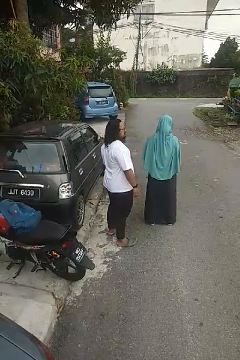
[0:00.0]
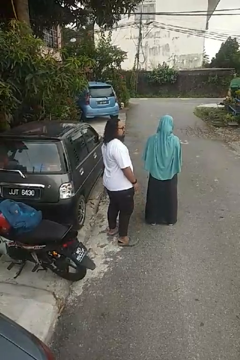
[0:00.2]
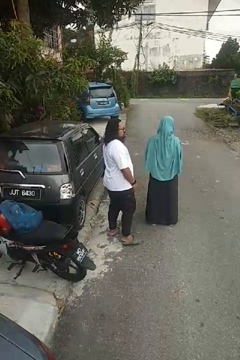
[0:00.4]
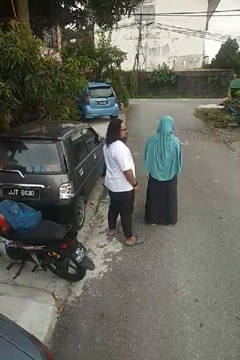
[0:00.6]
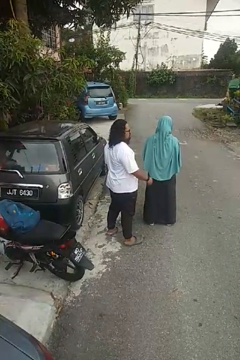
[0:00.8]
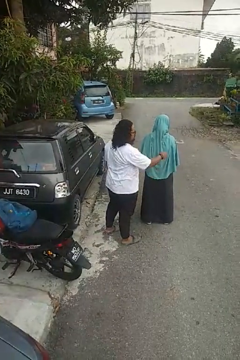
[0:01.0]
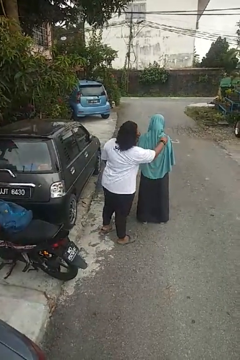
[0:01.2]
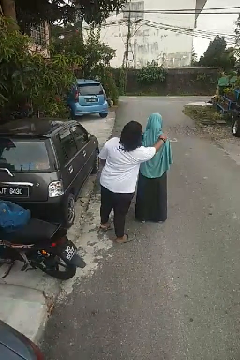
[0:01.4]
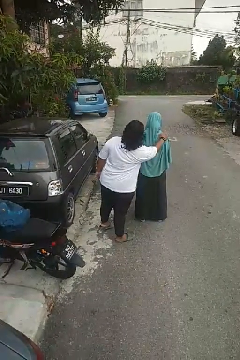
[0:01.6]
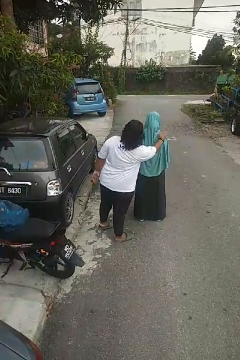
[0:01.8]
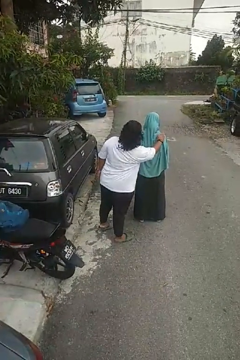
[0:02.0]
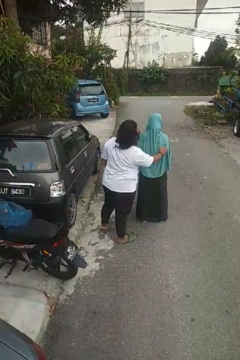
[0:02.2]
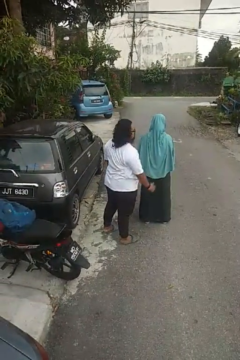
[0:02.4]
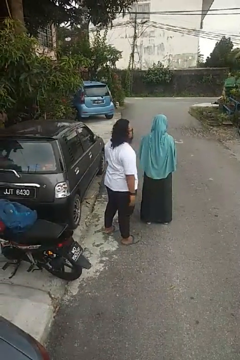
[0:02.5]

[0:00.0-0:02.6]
person touches back of person

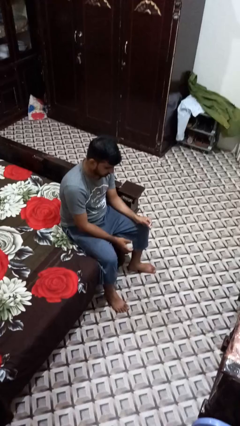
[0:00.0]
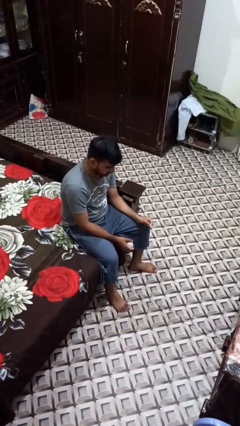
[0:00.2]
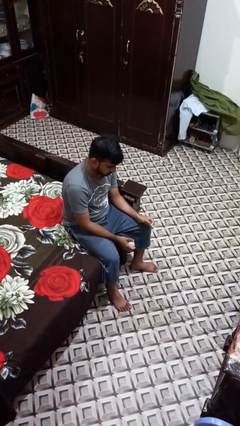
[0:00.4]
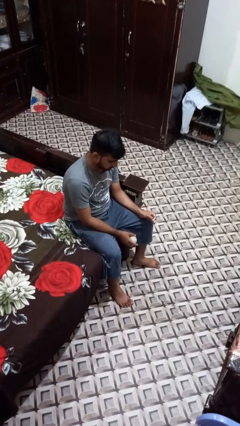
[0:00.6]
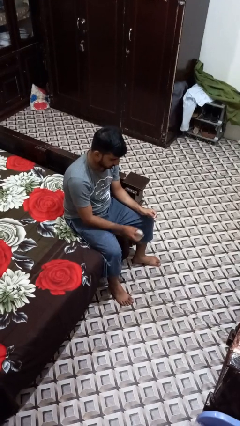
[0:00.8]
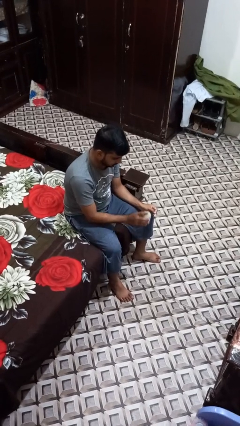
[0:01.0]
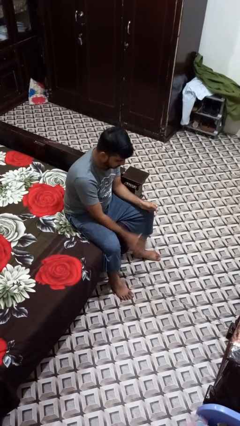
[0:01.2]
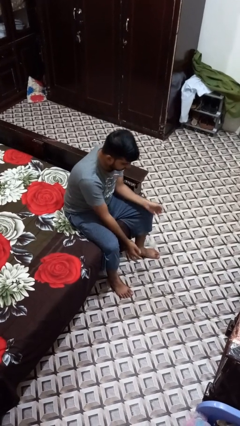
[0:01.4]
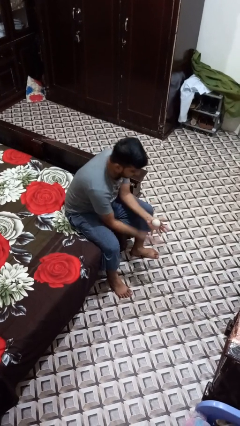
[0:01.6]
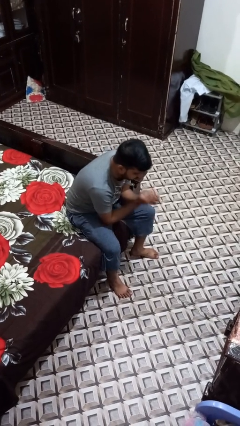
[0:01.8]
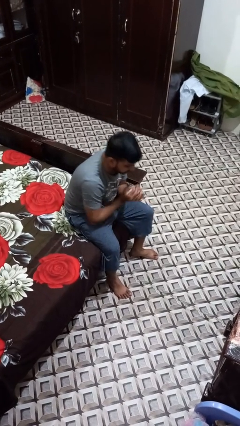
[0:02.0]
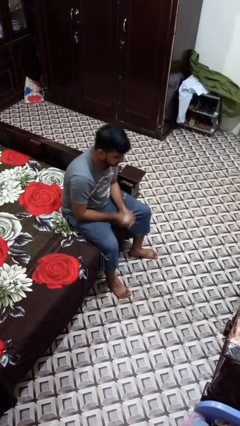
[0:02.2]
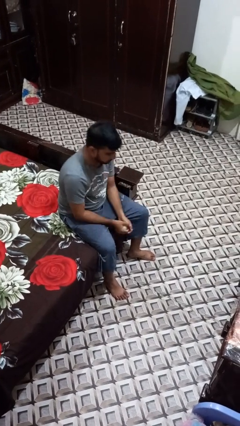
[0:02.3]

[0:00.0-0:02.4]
person bounces ball on floor

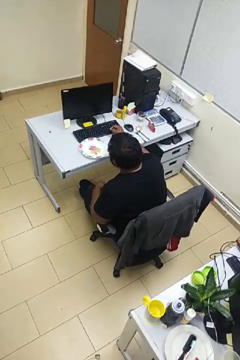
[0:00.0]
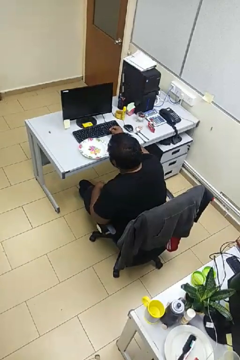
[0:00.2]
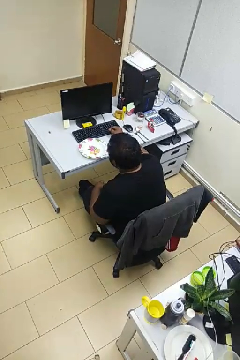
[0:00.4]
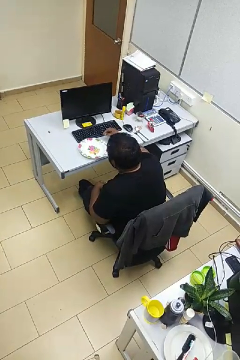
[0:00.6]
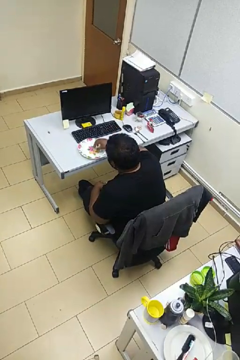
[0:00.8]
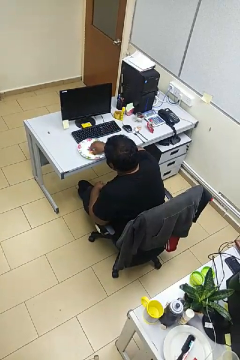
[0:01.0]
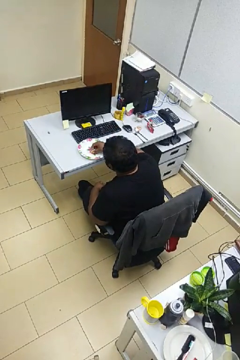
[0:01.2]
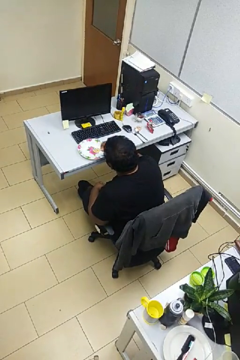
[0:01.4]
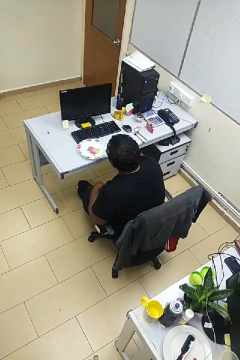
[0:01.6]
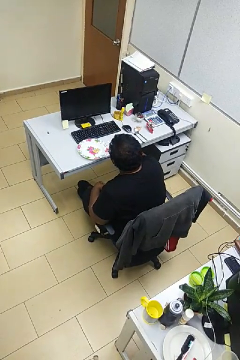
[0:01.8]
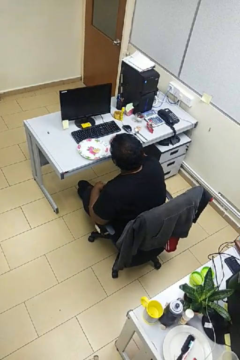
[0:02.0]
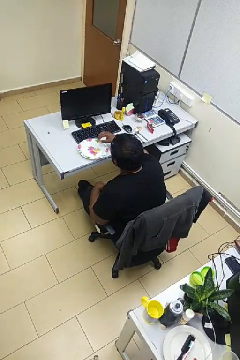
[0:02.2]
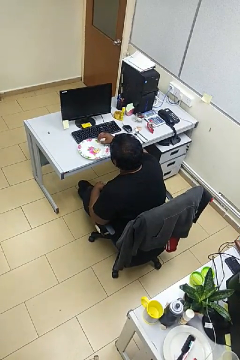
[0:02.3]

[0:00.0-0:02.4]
person eats with hands

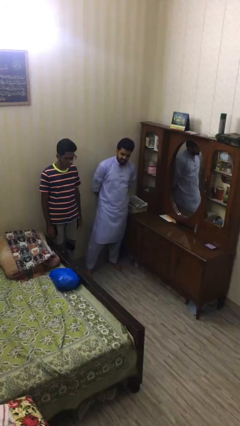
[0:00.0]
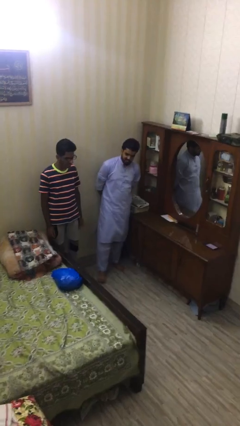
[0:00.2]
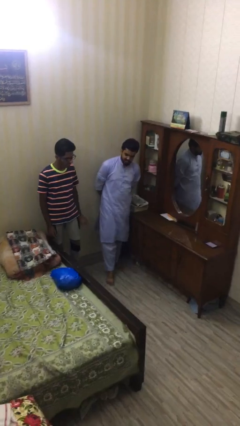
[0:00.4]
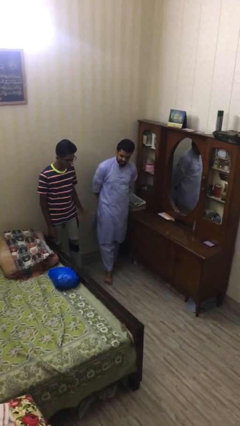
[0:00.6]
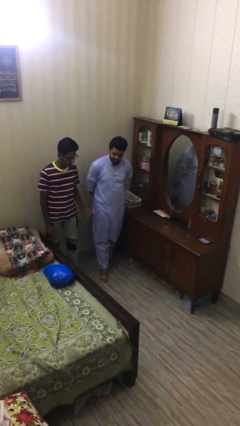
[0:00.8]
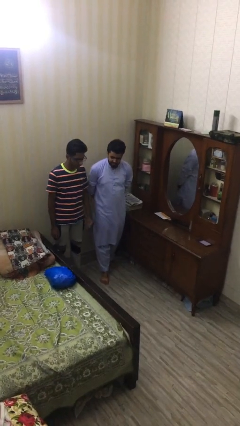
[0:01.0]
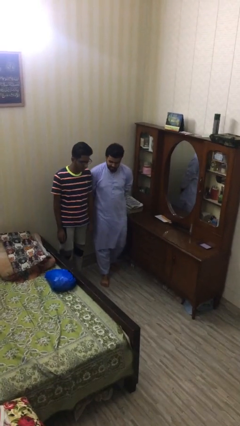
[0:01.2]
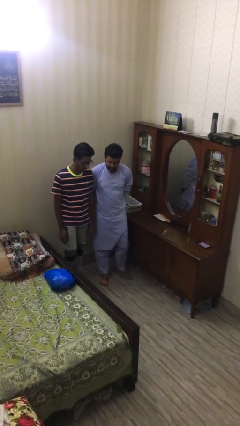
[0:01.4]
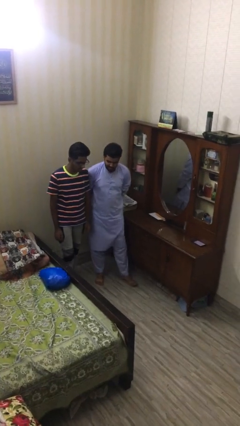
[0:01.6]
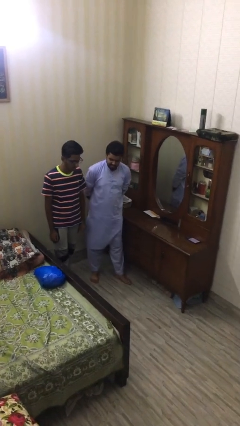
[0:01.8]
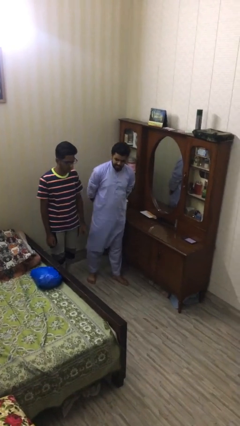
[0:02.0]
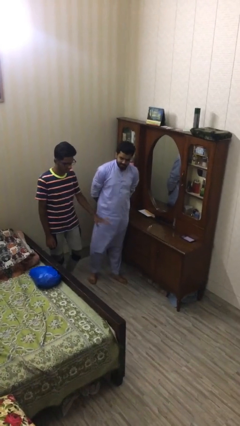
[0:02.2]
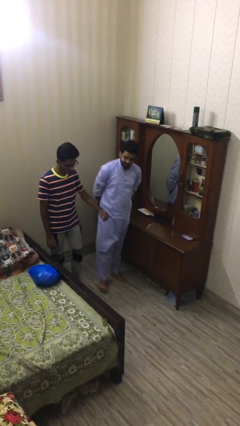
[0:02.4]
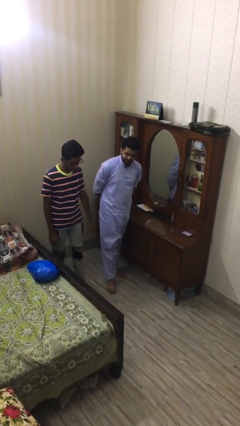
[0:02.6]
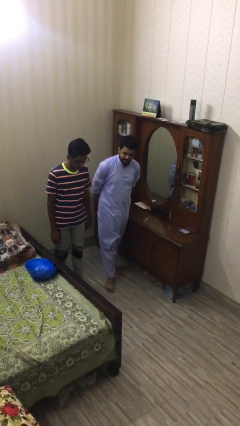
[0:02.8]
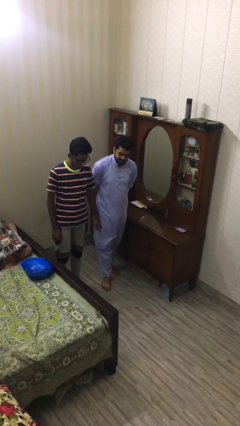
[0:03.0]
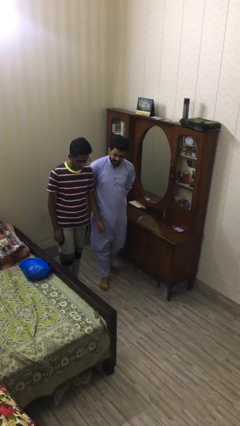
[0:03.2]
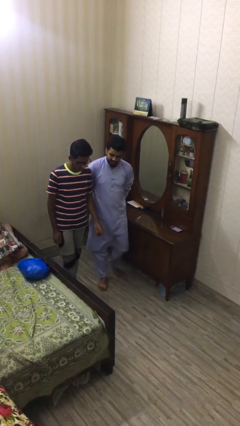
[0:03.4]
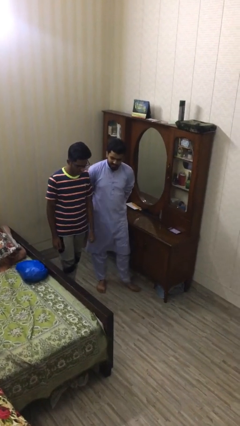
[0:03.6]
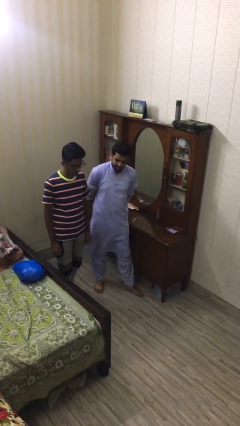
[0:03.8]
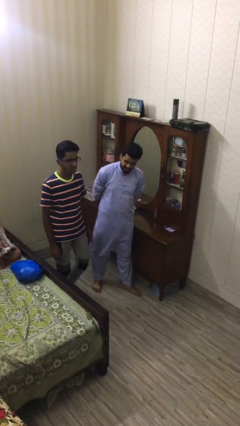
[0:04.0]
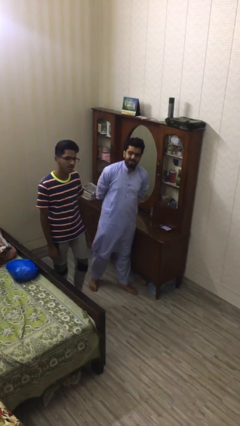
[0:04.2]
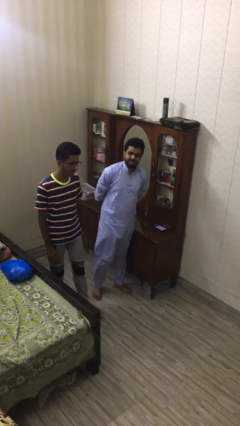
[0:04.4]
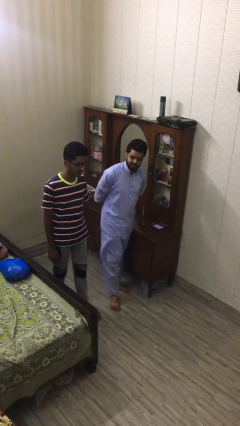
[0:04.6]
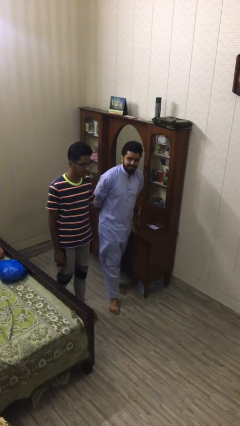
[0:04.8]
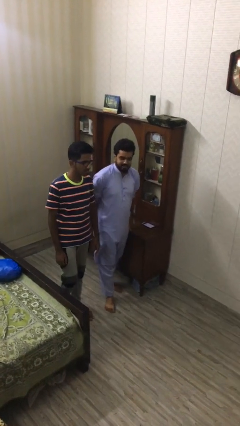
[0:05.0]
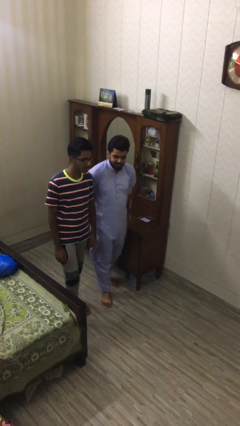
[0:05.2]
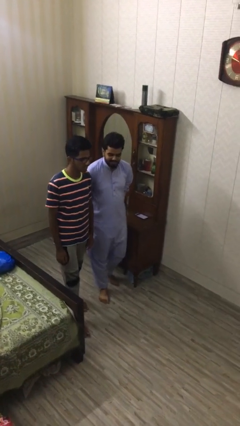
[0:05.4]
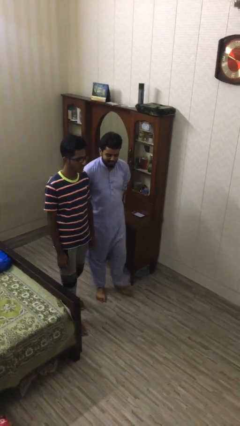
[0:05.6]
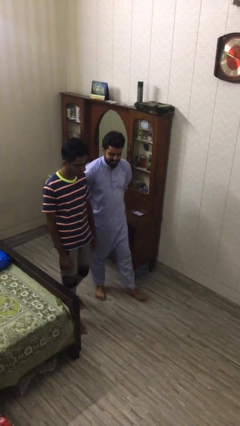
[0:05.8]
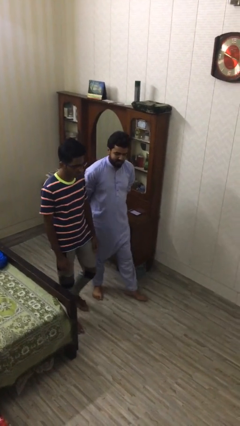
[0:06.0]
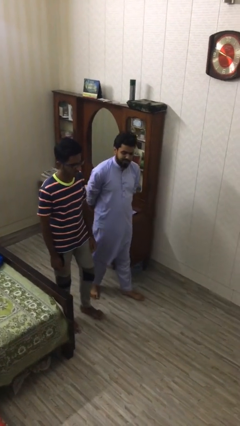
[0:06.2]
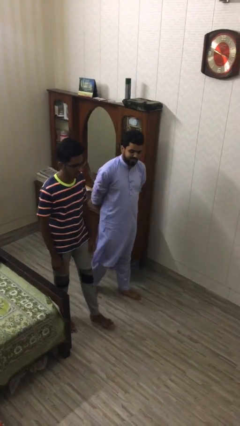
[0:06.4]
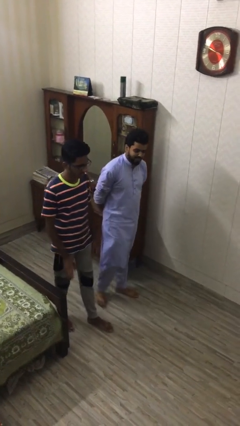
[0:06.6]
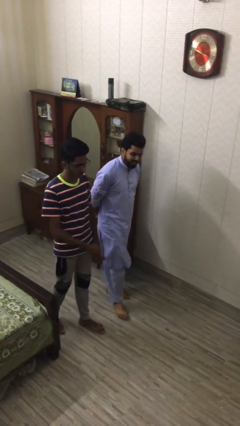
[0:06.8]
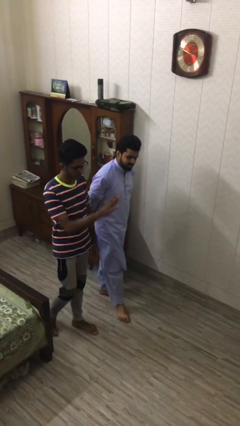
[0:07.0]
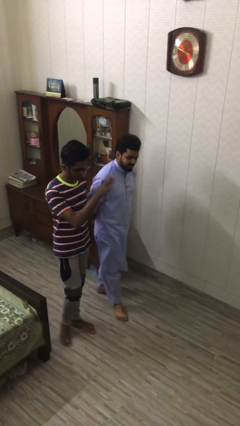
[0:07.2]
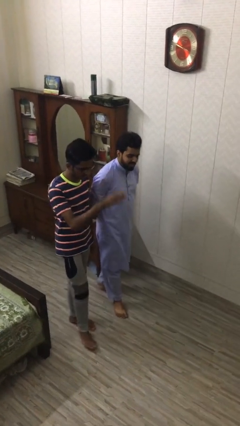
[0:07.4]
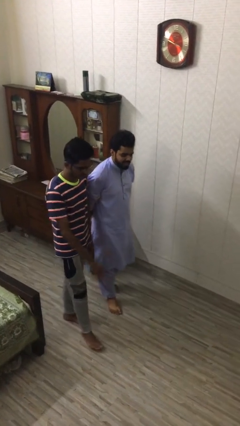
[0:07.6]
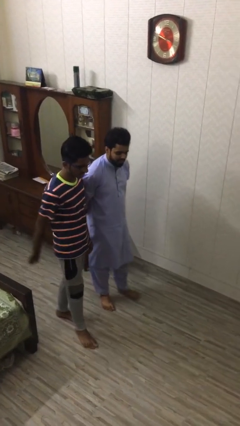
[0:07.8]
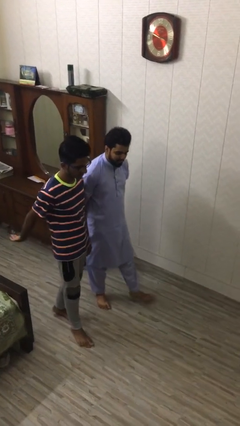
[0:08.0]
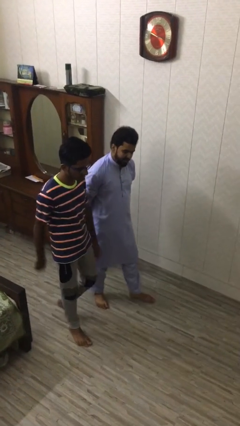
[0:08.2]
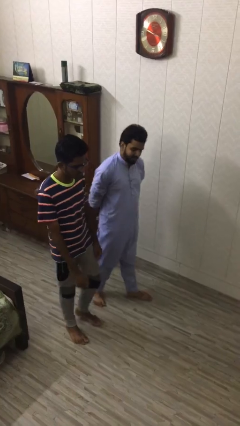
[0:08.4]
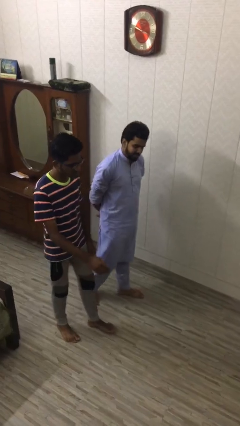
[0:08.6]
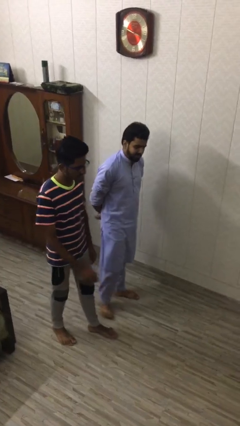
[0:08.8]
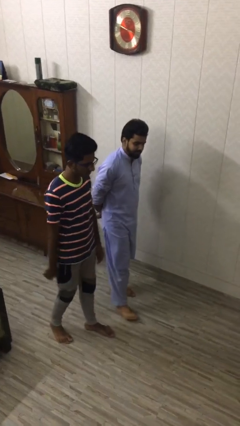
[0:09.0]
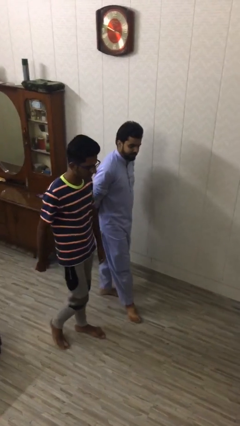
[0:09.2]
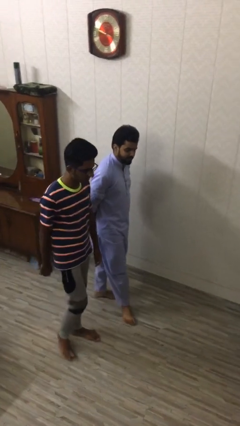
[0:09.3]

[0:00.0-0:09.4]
person talks to person

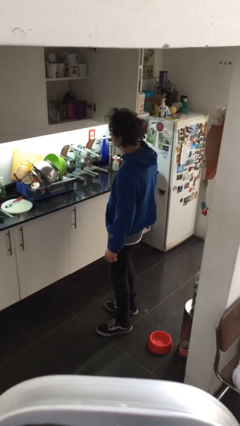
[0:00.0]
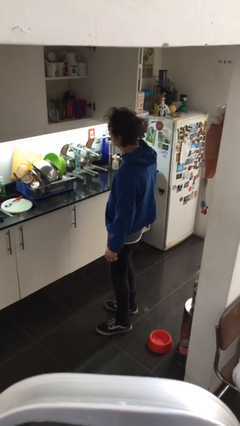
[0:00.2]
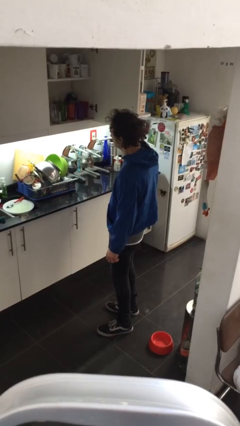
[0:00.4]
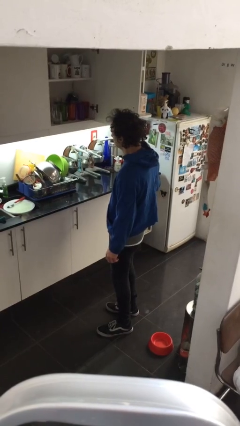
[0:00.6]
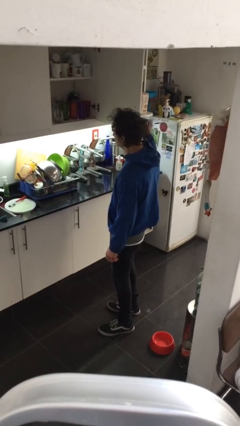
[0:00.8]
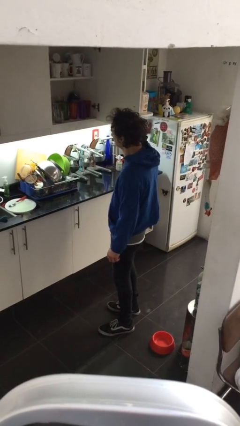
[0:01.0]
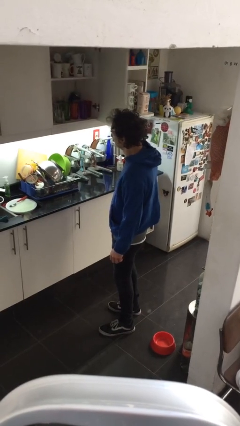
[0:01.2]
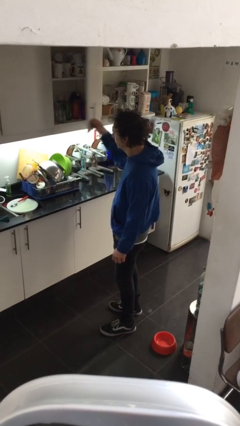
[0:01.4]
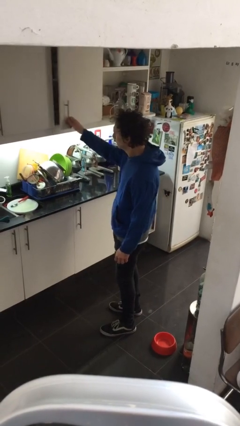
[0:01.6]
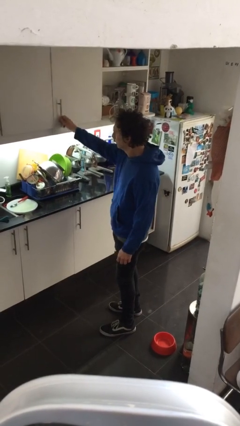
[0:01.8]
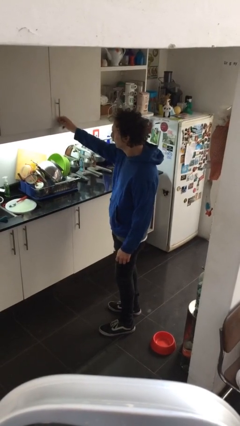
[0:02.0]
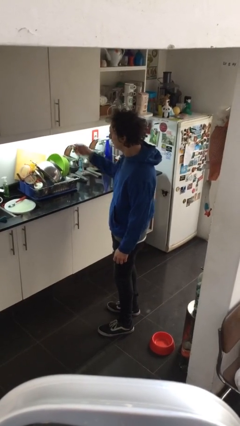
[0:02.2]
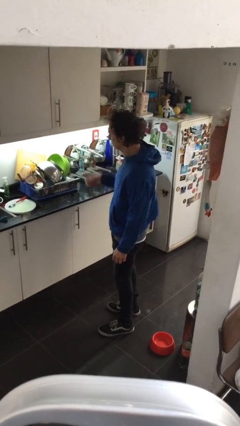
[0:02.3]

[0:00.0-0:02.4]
person closes cabinet
